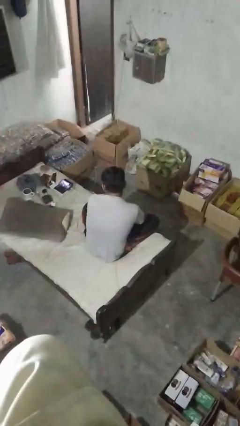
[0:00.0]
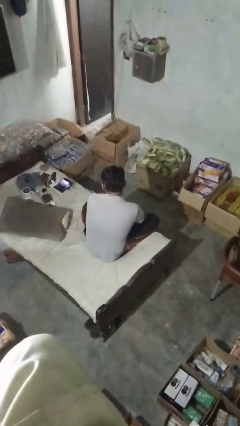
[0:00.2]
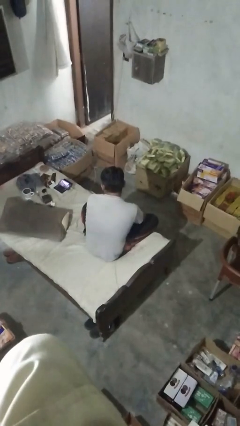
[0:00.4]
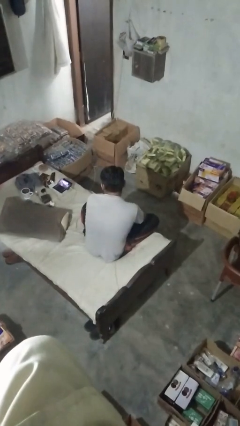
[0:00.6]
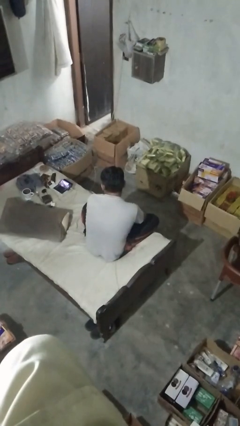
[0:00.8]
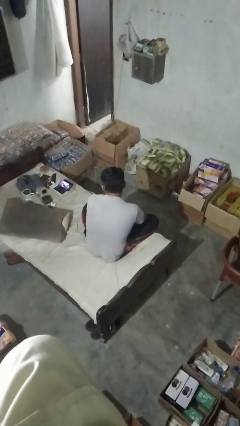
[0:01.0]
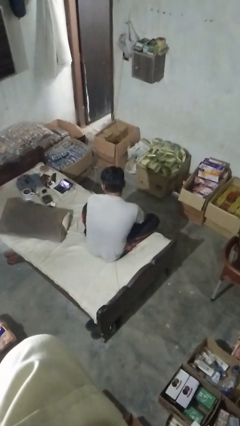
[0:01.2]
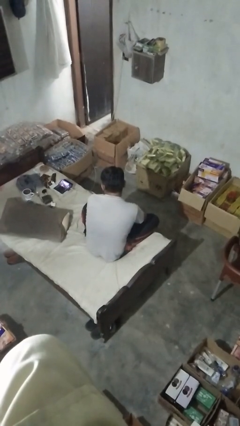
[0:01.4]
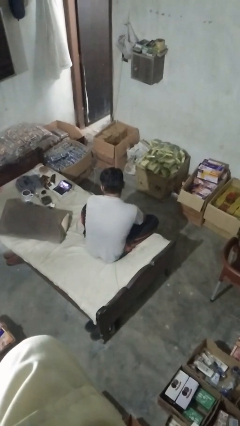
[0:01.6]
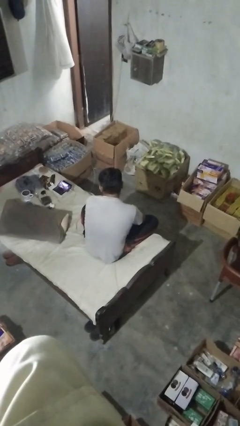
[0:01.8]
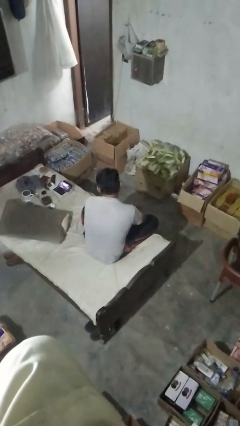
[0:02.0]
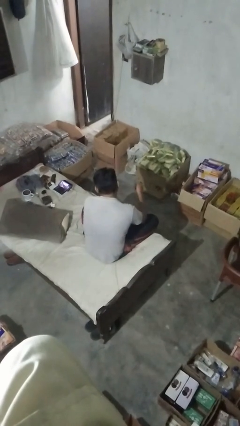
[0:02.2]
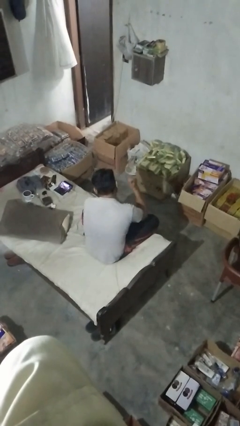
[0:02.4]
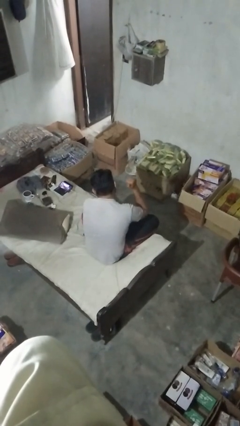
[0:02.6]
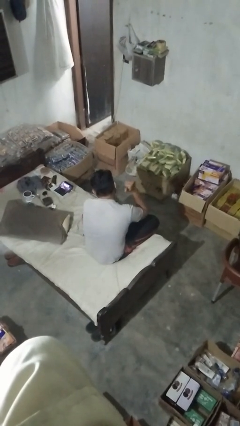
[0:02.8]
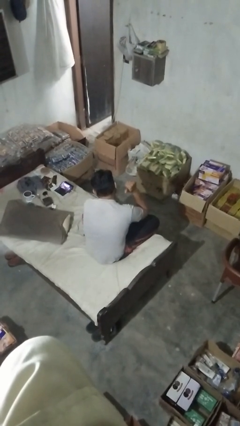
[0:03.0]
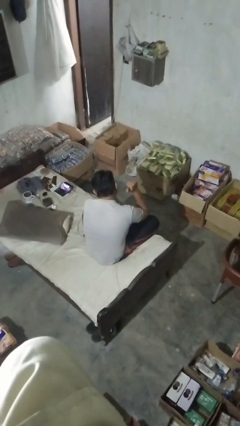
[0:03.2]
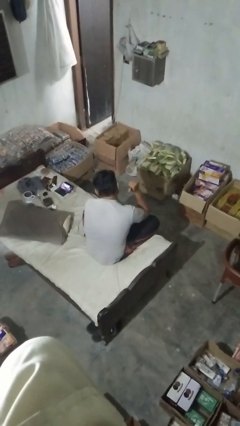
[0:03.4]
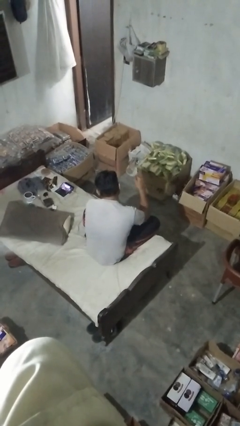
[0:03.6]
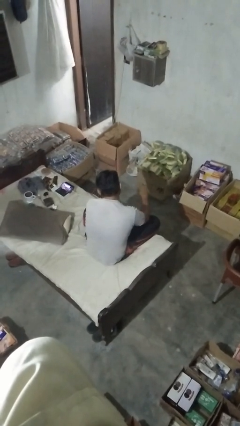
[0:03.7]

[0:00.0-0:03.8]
person gestures behind me

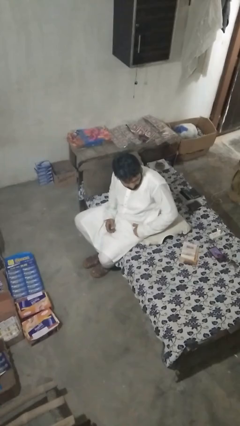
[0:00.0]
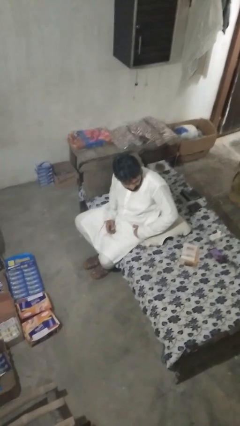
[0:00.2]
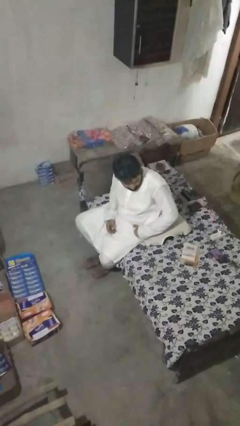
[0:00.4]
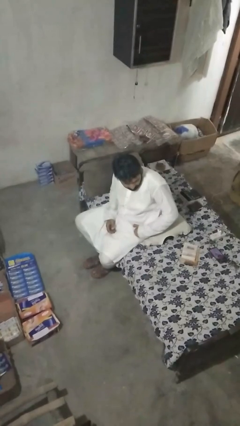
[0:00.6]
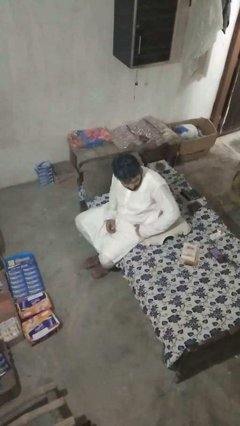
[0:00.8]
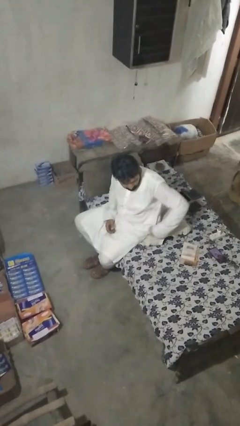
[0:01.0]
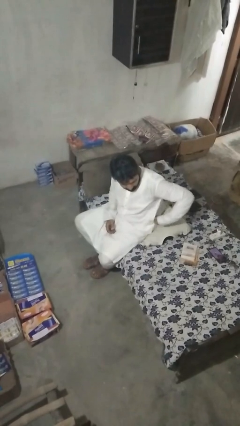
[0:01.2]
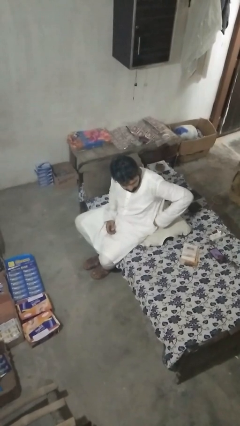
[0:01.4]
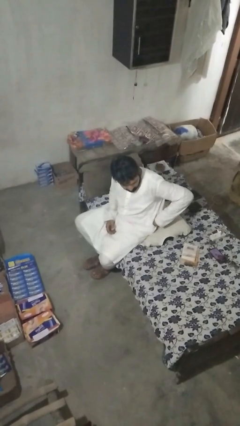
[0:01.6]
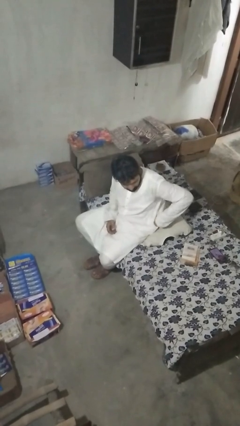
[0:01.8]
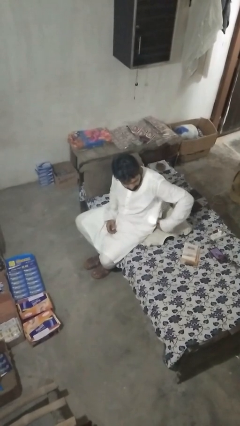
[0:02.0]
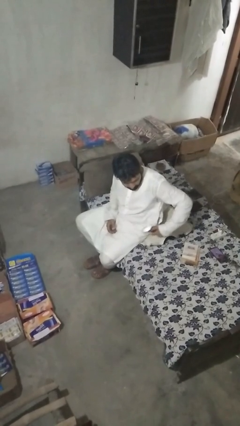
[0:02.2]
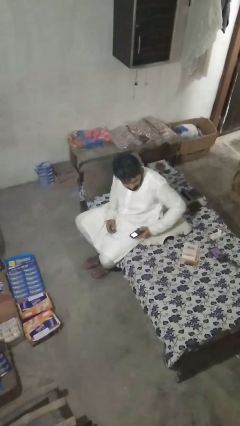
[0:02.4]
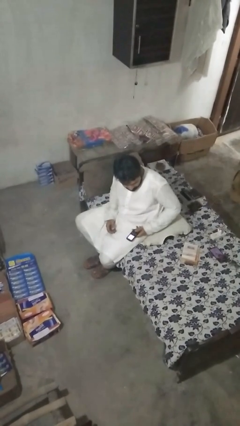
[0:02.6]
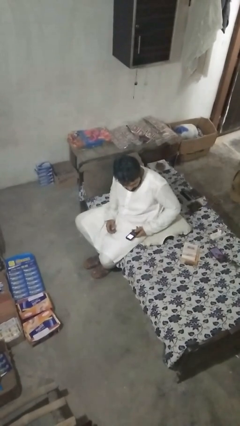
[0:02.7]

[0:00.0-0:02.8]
person takes phone from pocket

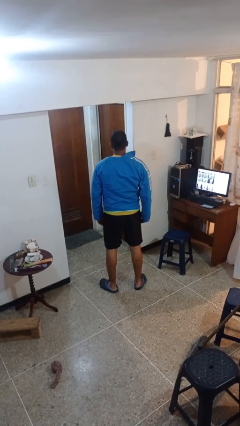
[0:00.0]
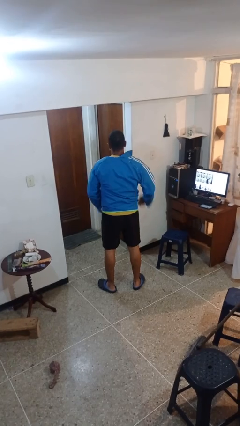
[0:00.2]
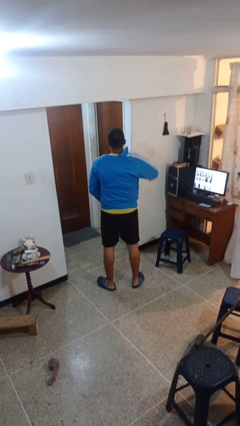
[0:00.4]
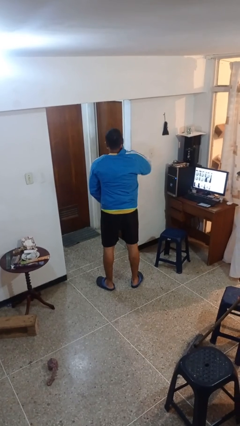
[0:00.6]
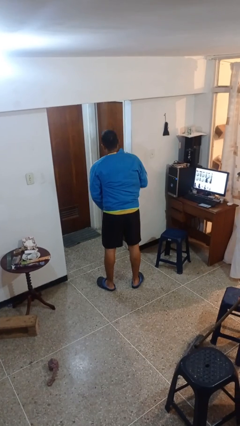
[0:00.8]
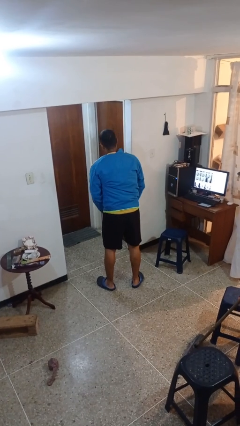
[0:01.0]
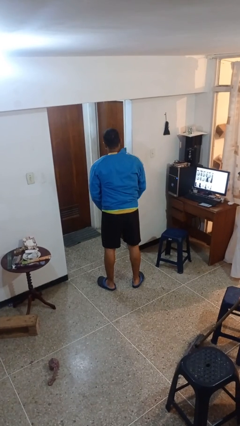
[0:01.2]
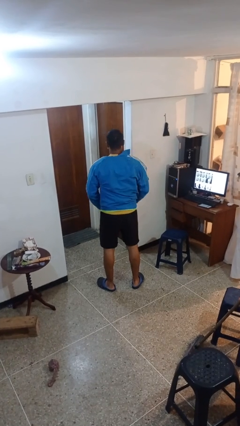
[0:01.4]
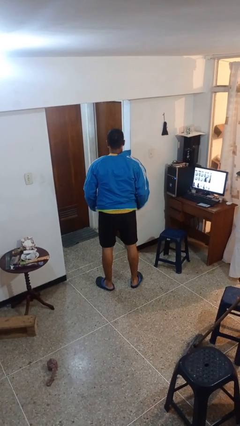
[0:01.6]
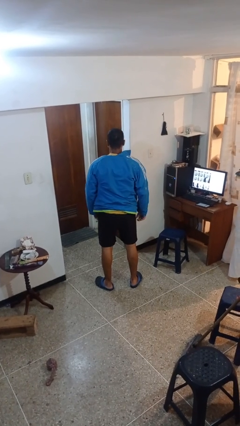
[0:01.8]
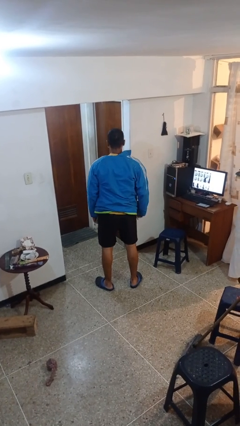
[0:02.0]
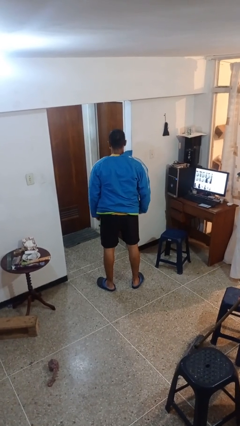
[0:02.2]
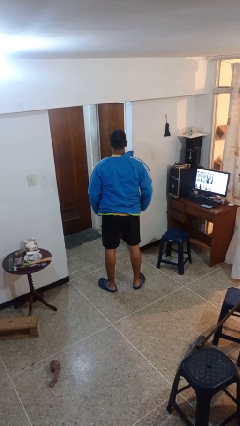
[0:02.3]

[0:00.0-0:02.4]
person unzips jacket

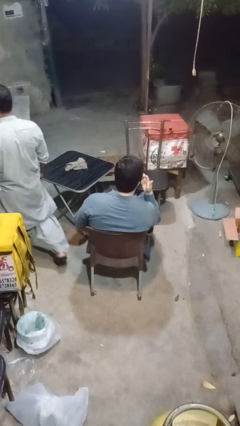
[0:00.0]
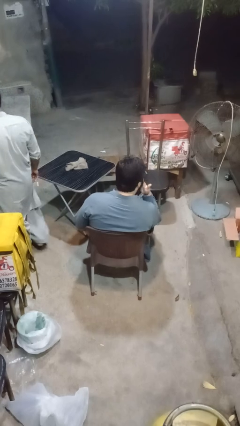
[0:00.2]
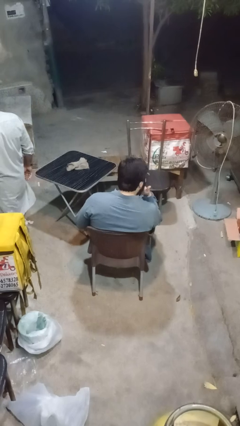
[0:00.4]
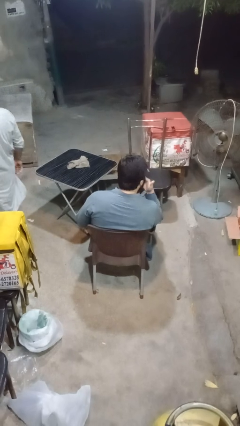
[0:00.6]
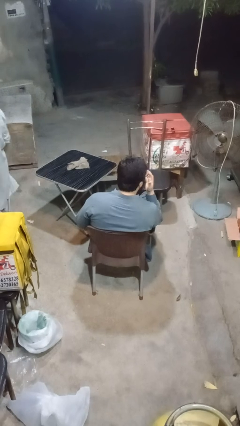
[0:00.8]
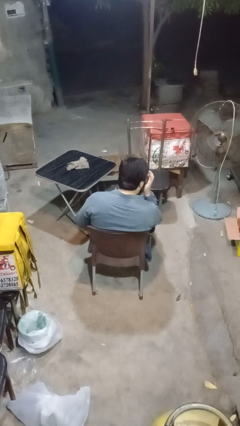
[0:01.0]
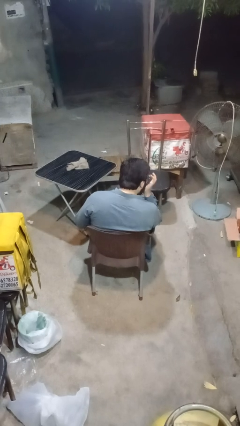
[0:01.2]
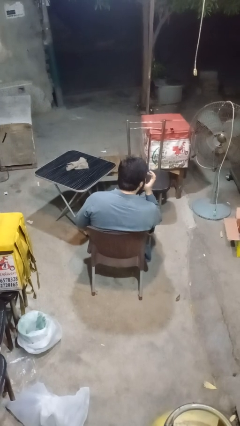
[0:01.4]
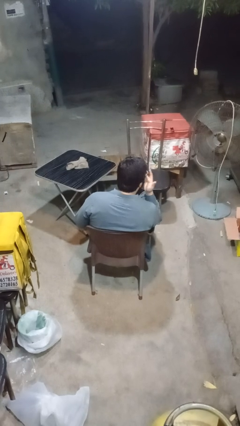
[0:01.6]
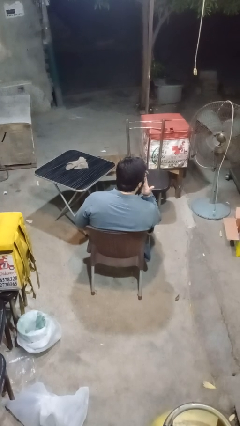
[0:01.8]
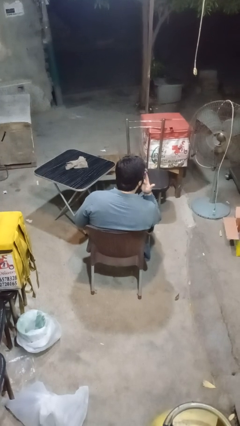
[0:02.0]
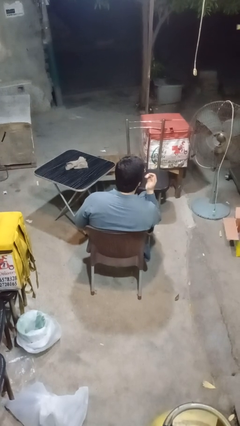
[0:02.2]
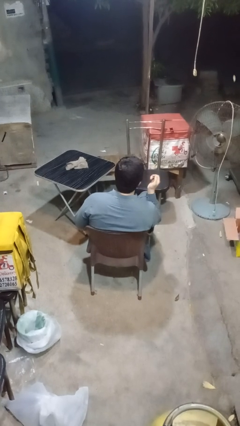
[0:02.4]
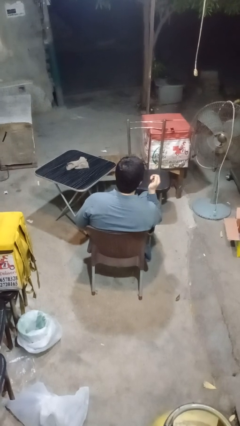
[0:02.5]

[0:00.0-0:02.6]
person licks fingers

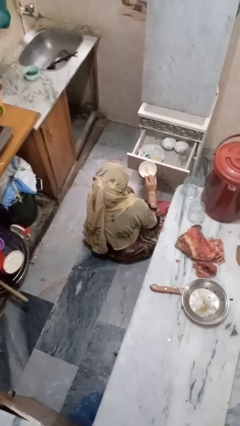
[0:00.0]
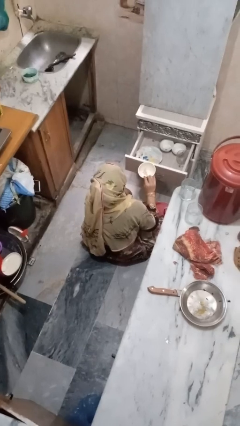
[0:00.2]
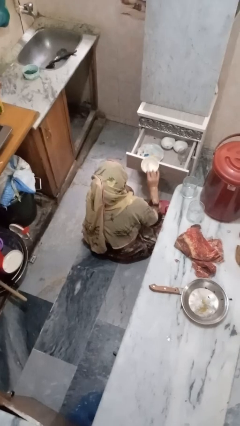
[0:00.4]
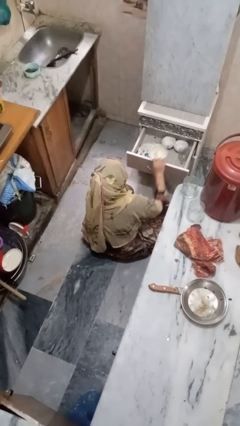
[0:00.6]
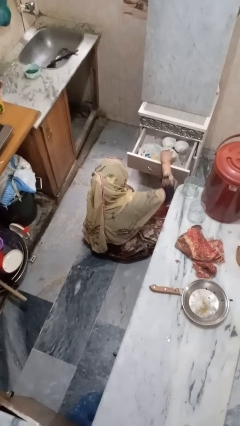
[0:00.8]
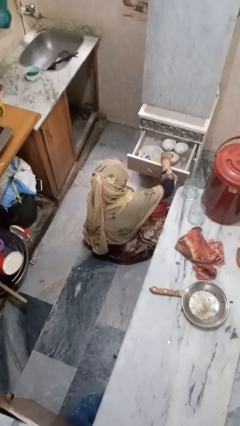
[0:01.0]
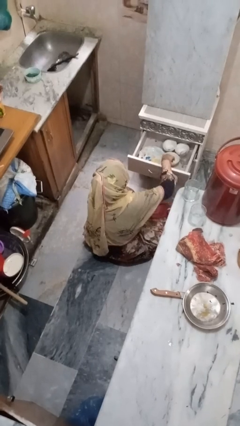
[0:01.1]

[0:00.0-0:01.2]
person puts object into kitchen drawer

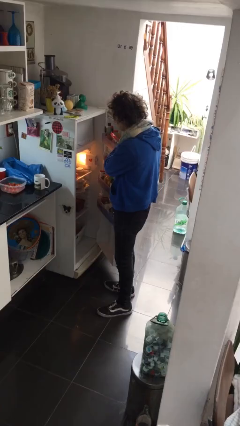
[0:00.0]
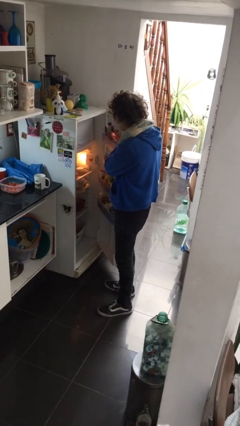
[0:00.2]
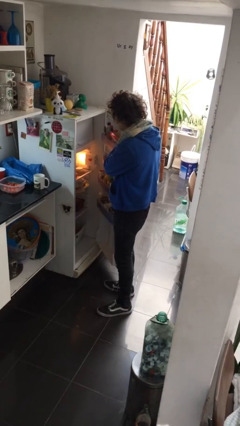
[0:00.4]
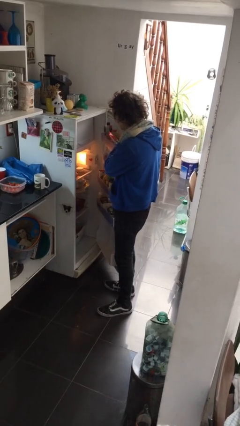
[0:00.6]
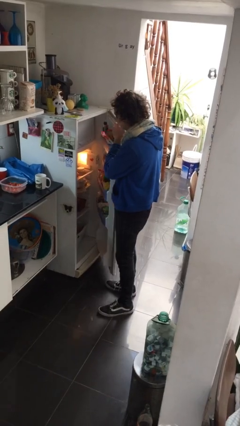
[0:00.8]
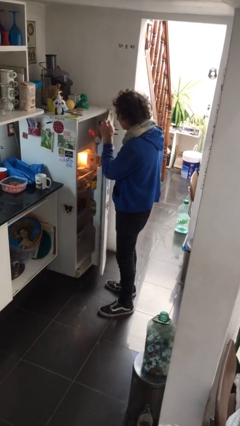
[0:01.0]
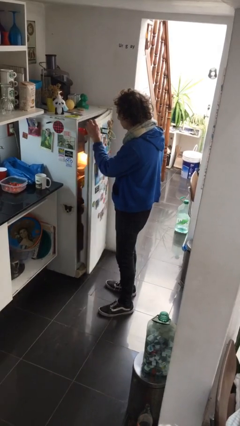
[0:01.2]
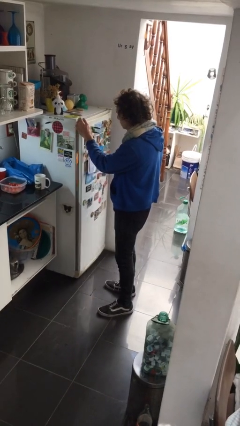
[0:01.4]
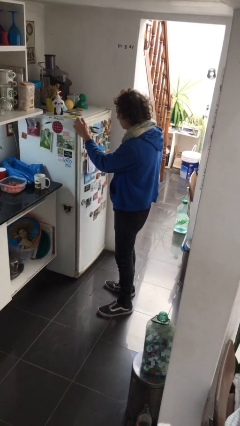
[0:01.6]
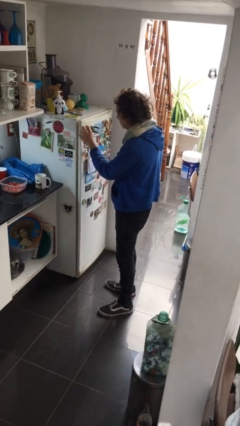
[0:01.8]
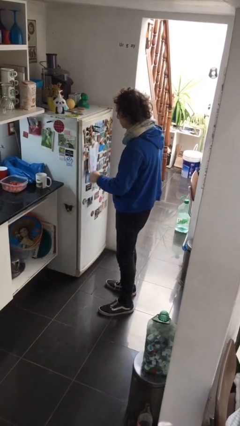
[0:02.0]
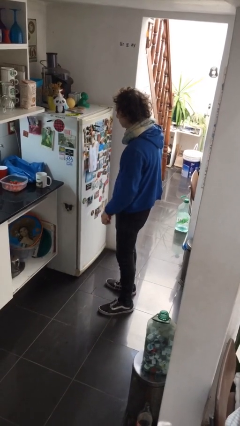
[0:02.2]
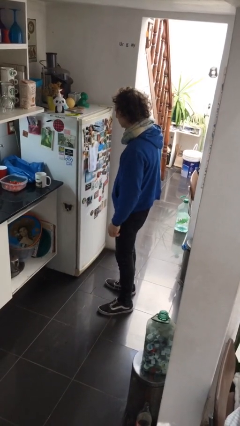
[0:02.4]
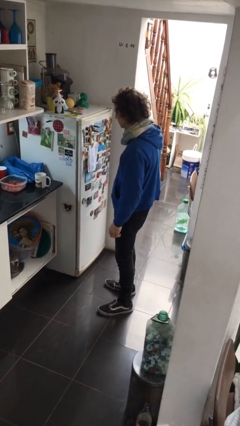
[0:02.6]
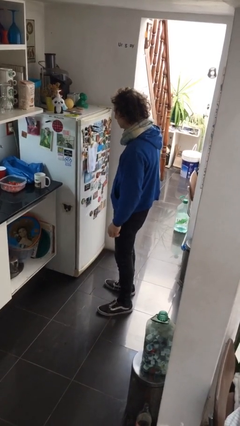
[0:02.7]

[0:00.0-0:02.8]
person closes refrigerator

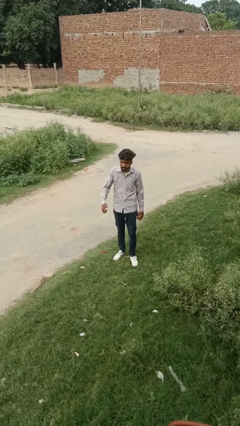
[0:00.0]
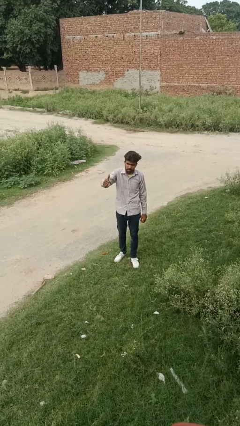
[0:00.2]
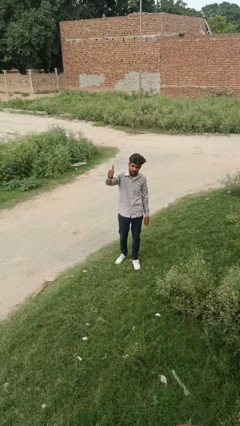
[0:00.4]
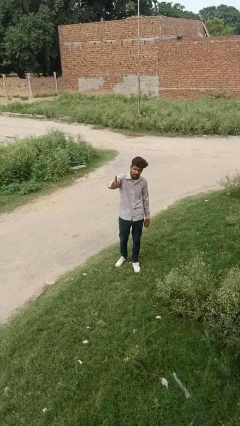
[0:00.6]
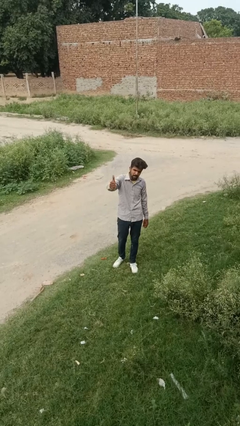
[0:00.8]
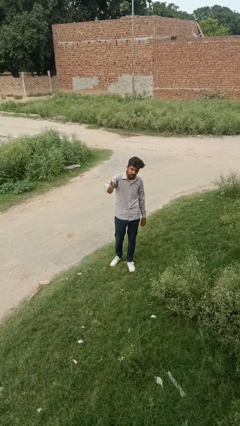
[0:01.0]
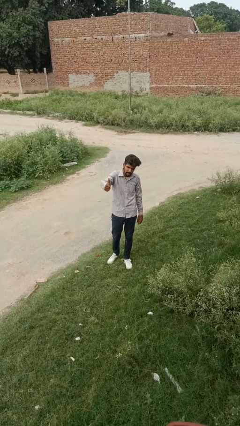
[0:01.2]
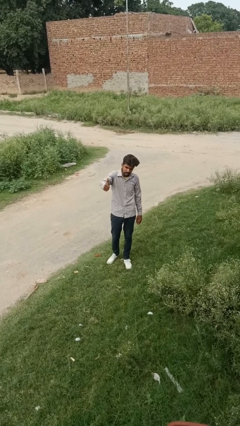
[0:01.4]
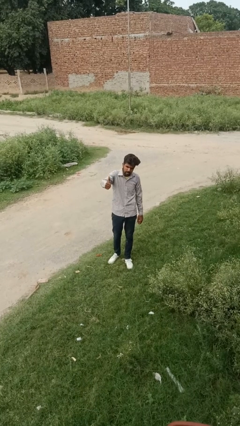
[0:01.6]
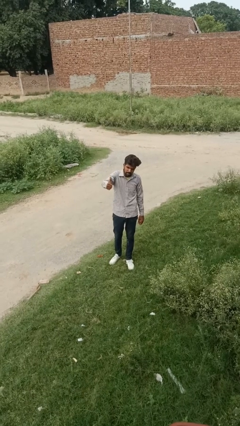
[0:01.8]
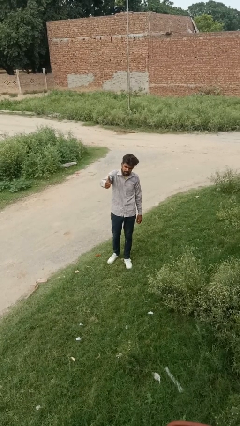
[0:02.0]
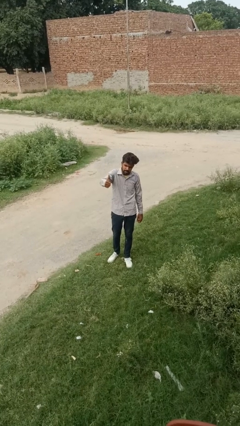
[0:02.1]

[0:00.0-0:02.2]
person gestures thumbs up
